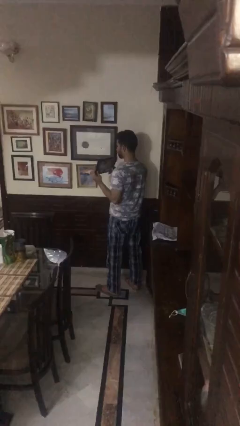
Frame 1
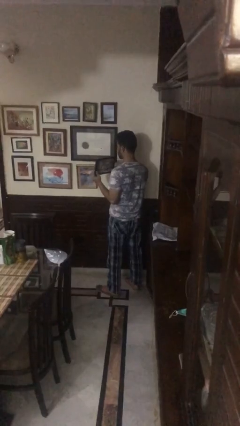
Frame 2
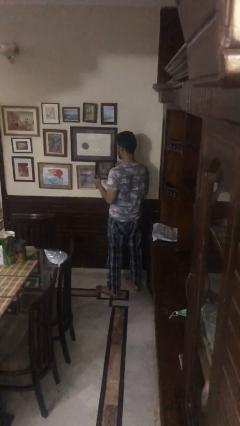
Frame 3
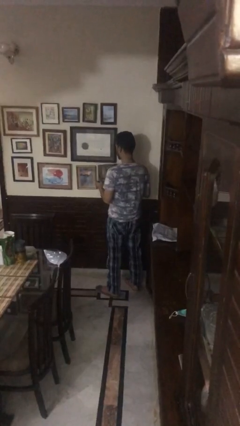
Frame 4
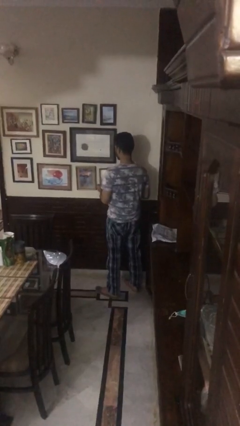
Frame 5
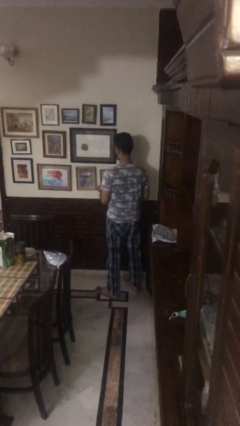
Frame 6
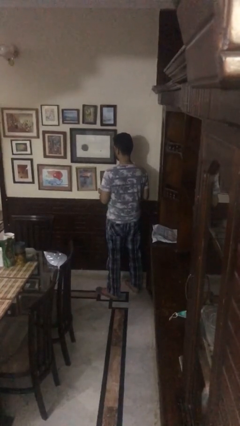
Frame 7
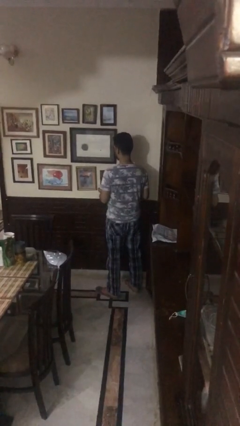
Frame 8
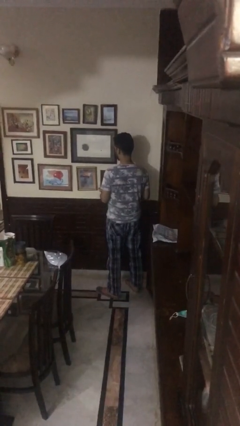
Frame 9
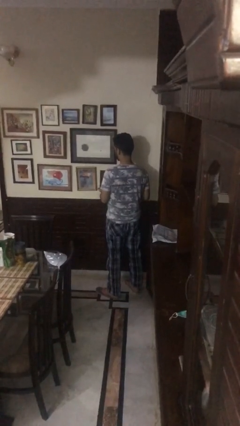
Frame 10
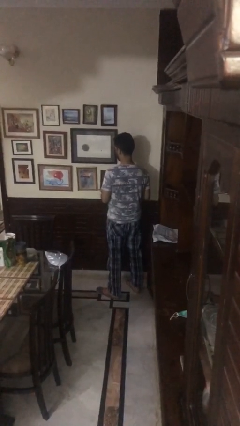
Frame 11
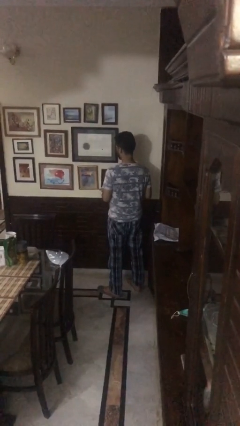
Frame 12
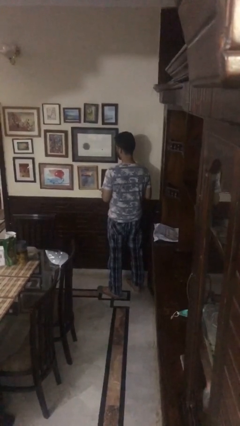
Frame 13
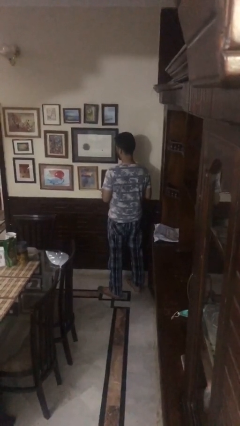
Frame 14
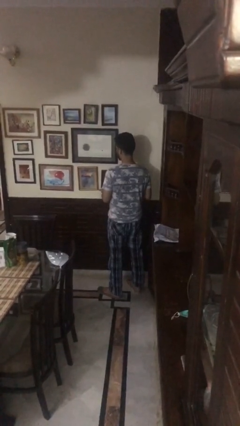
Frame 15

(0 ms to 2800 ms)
person puts up picture frame

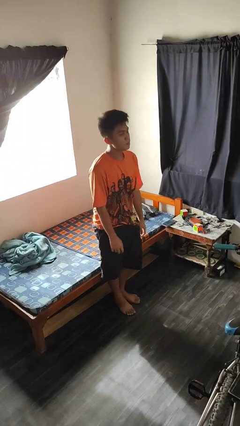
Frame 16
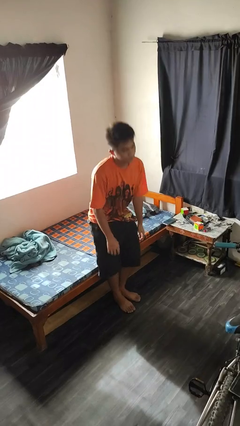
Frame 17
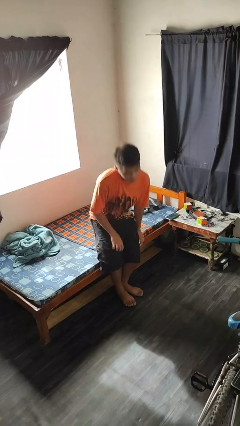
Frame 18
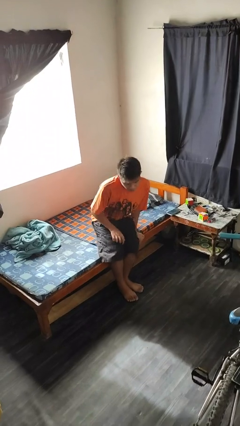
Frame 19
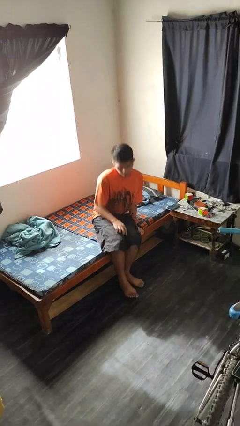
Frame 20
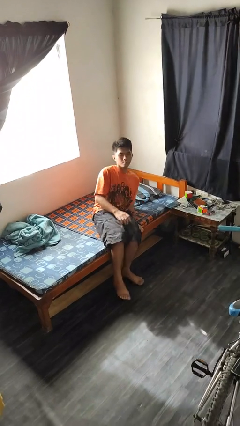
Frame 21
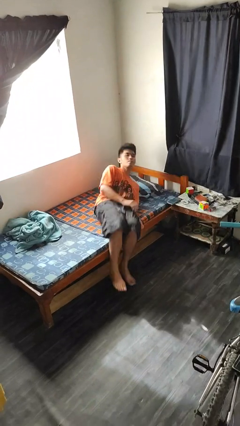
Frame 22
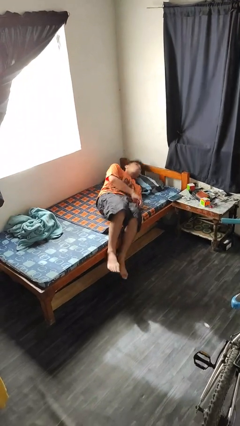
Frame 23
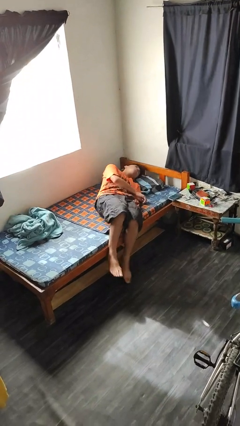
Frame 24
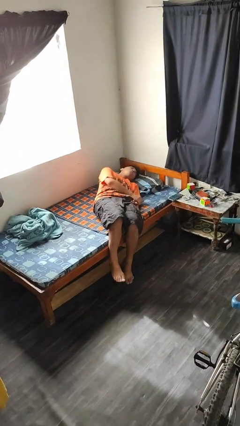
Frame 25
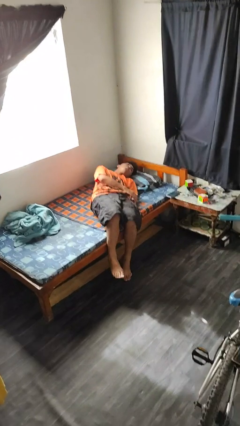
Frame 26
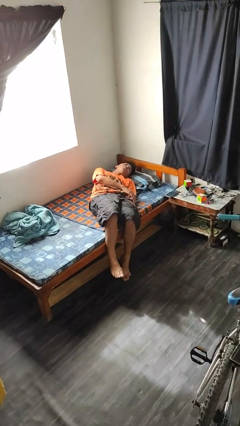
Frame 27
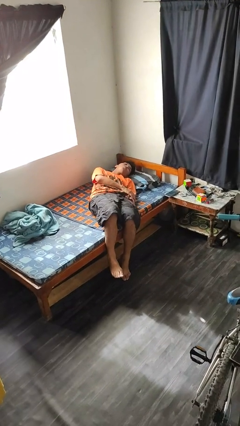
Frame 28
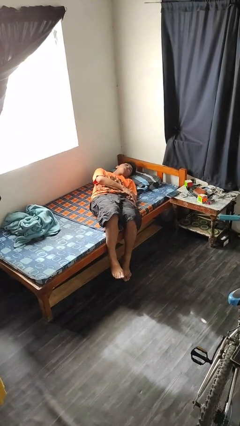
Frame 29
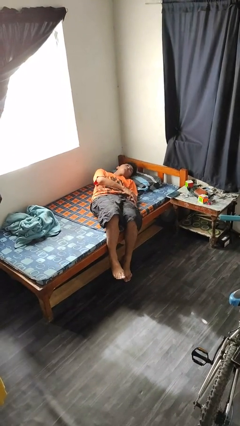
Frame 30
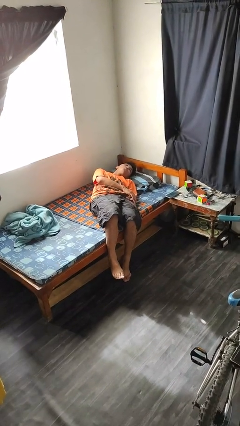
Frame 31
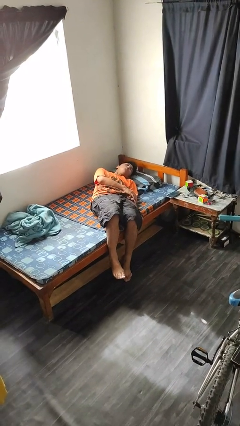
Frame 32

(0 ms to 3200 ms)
person lies down on bed

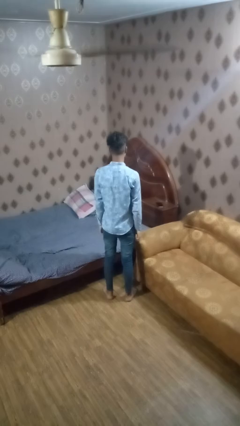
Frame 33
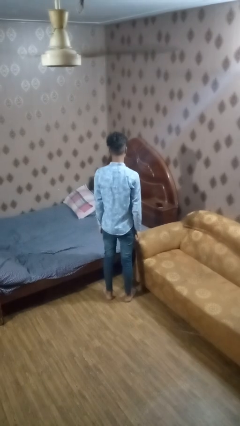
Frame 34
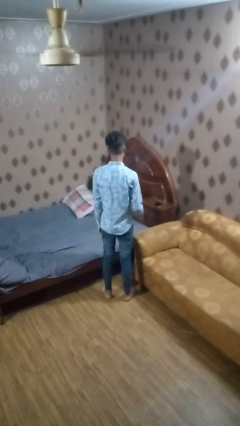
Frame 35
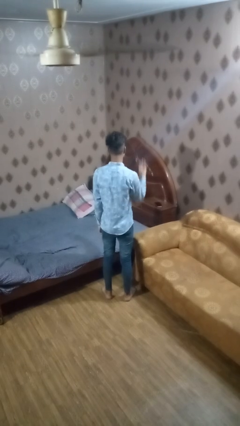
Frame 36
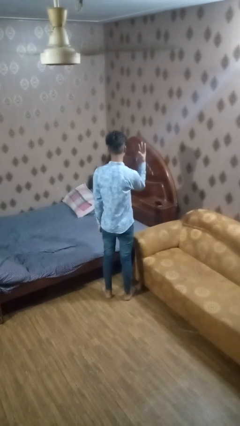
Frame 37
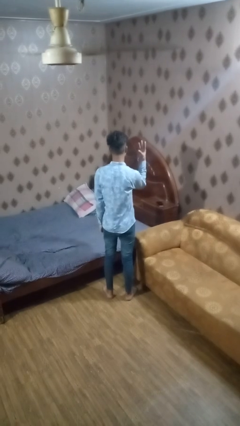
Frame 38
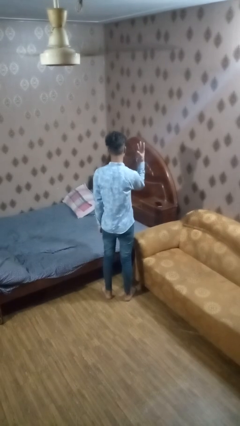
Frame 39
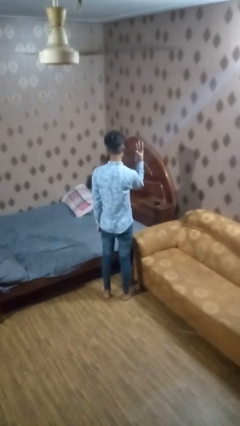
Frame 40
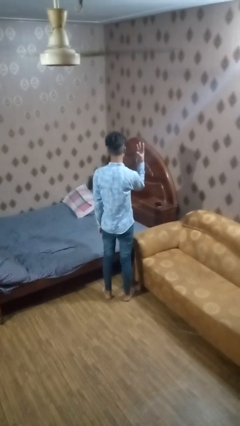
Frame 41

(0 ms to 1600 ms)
person gestures number three

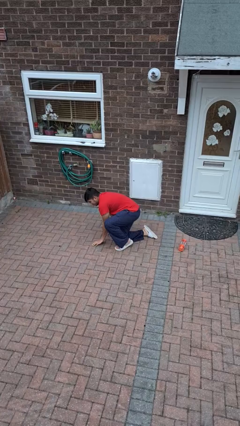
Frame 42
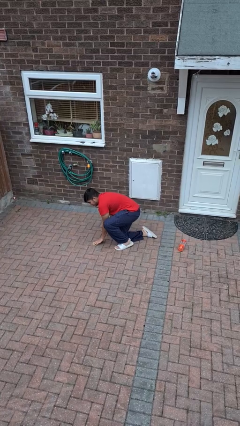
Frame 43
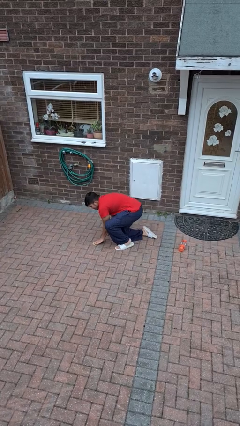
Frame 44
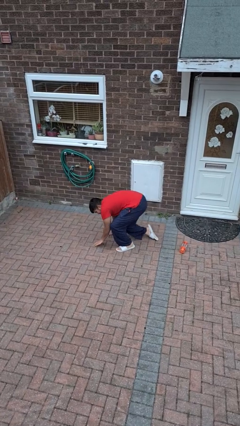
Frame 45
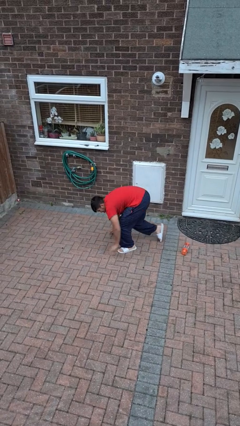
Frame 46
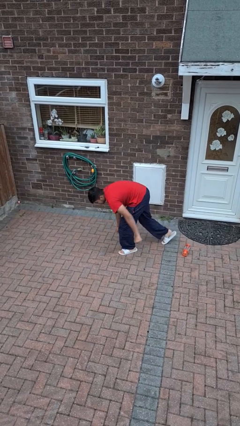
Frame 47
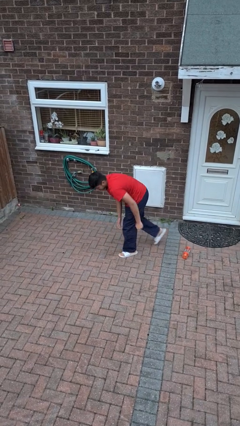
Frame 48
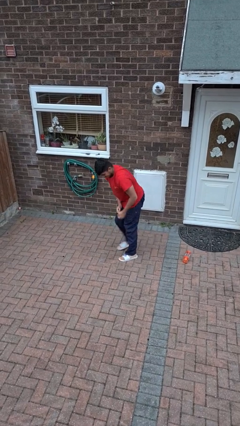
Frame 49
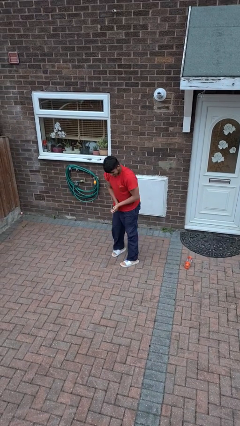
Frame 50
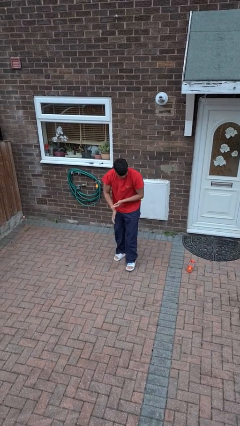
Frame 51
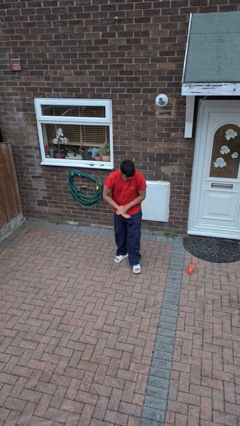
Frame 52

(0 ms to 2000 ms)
person stands up from floor

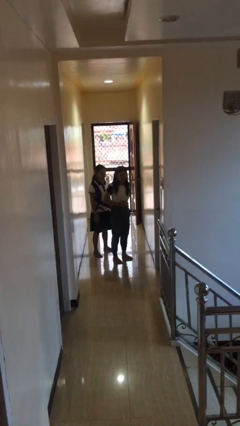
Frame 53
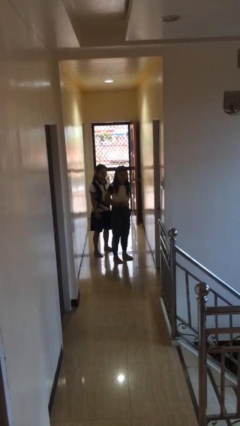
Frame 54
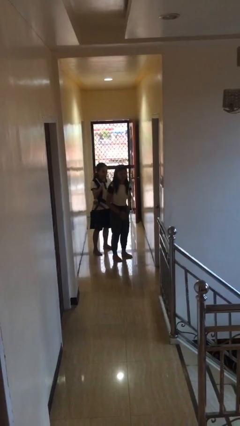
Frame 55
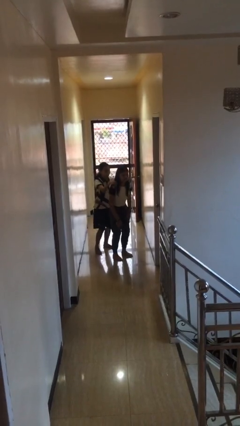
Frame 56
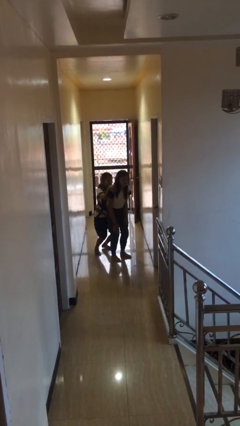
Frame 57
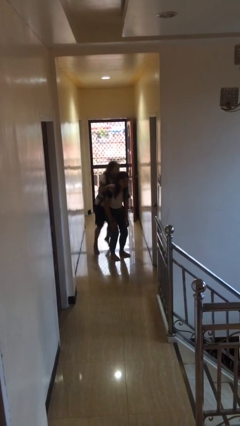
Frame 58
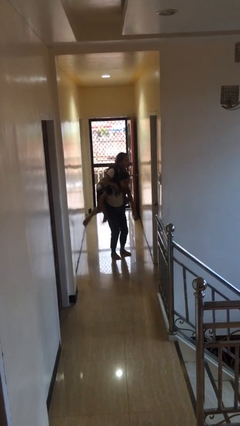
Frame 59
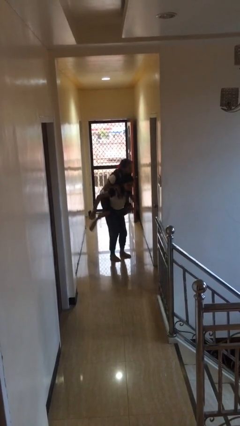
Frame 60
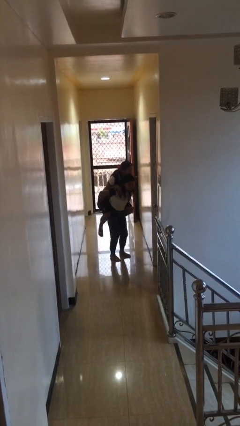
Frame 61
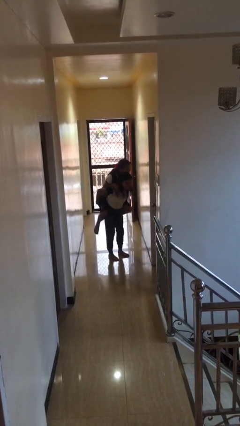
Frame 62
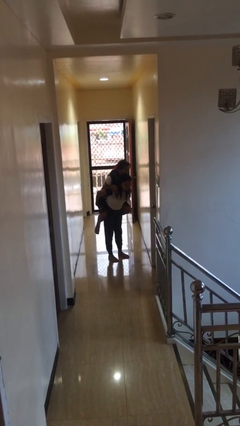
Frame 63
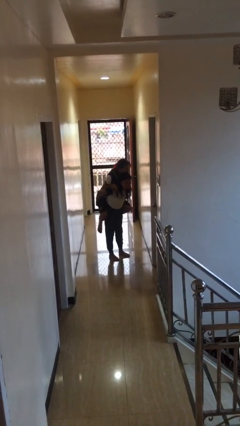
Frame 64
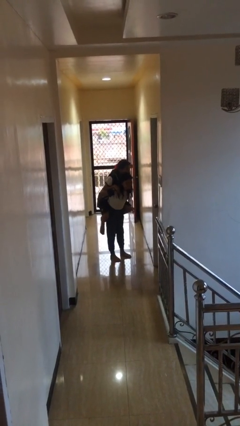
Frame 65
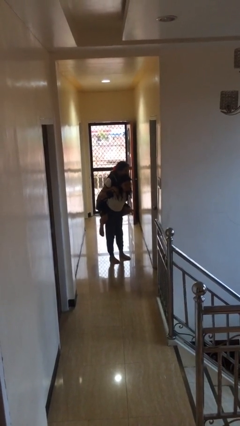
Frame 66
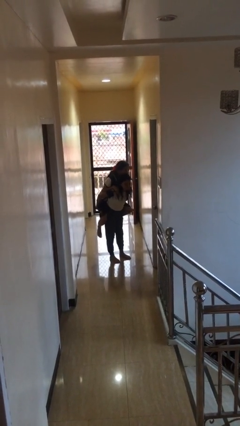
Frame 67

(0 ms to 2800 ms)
person carries person over shoulder

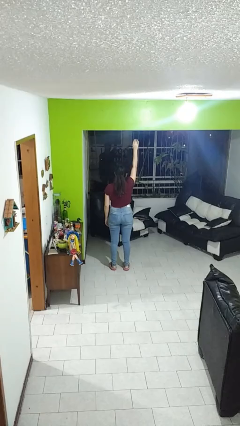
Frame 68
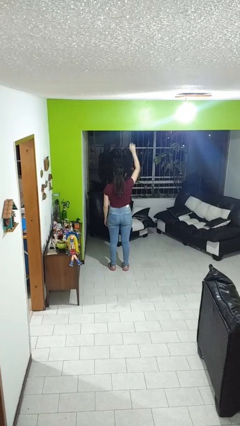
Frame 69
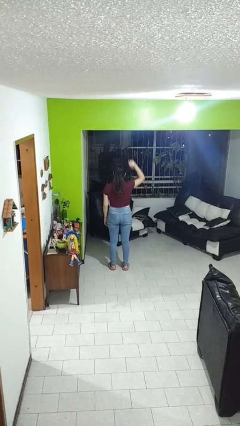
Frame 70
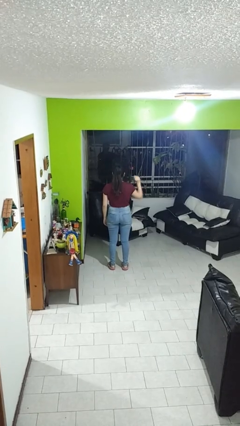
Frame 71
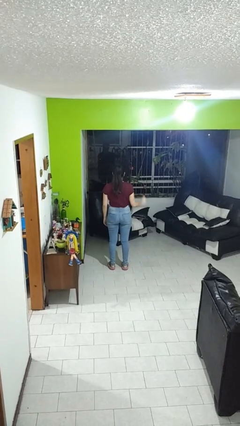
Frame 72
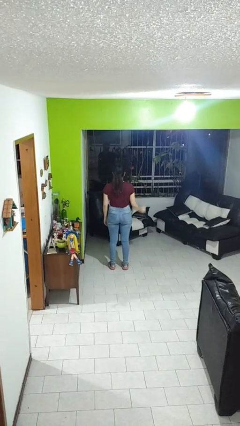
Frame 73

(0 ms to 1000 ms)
person gestures lower hand

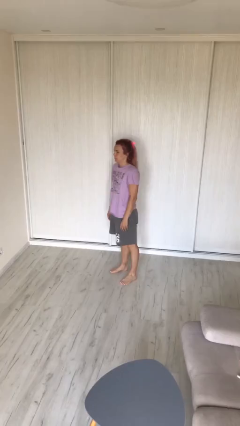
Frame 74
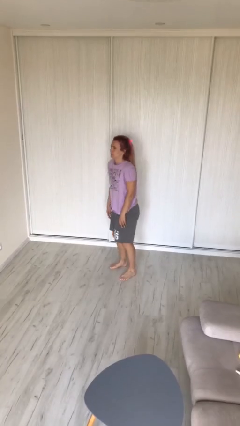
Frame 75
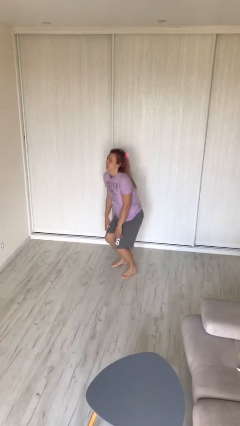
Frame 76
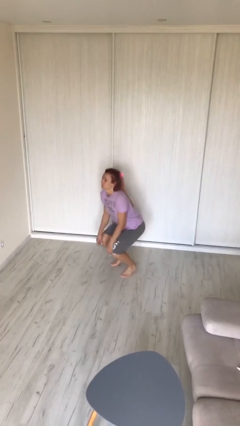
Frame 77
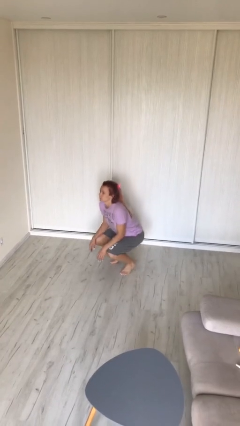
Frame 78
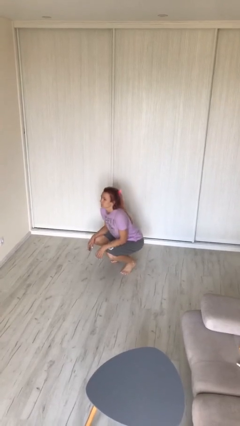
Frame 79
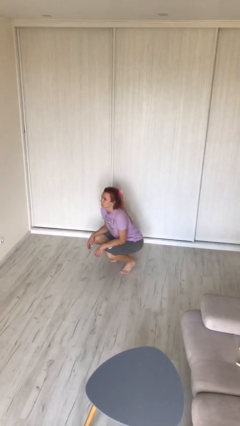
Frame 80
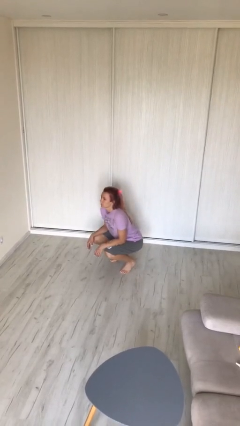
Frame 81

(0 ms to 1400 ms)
person squats

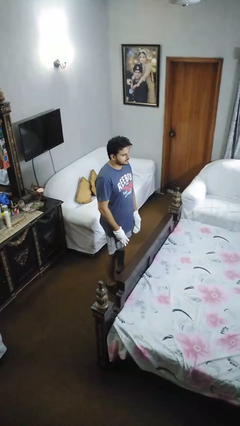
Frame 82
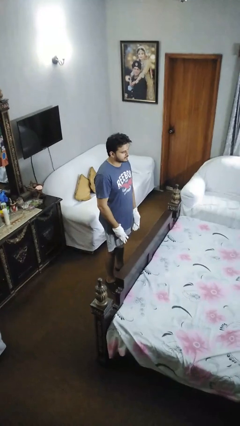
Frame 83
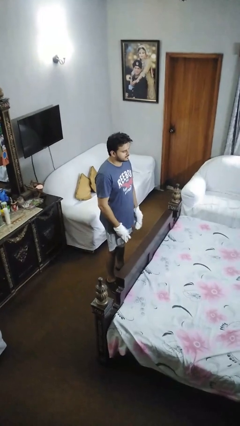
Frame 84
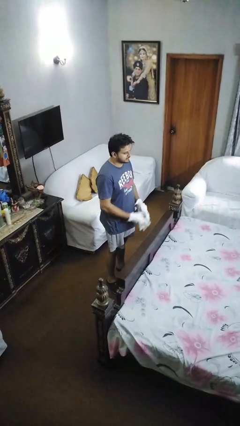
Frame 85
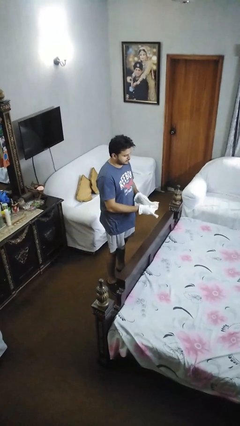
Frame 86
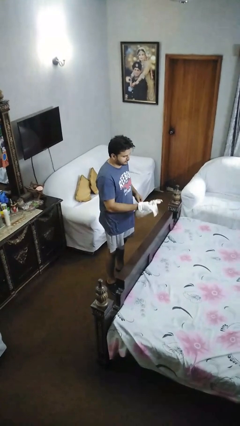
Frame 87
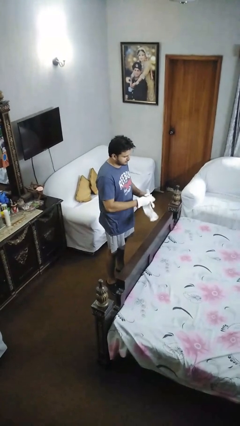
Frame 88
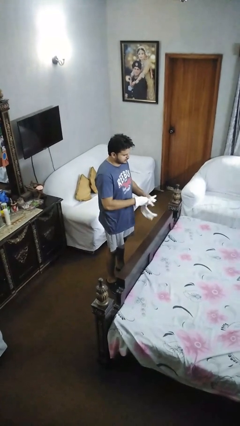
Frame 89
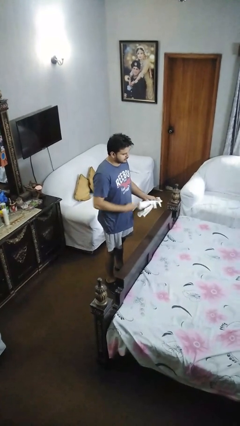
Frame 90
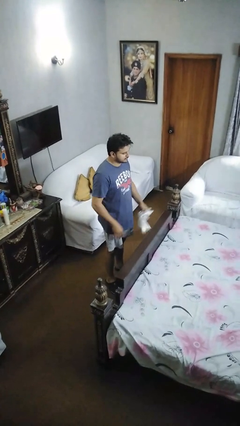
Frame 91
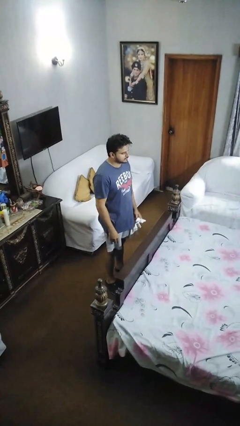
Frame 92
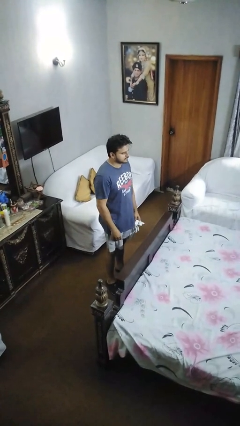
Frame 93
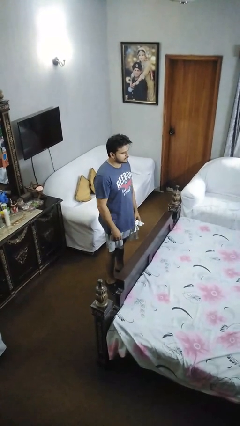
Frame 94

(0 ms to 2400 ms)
person takes off gloves
